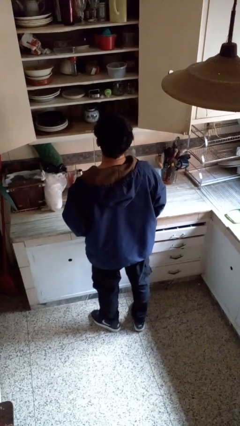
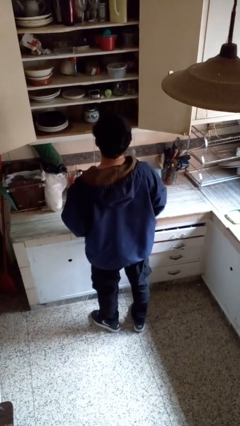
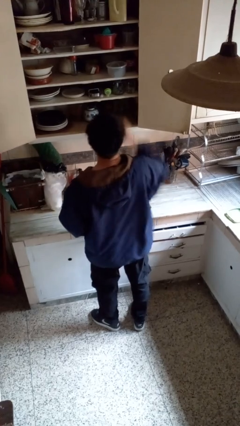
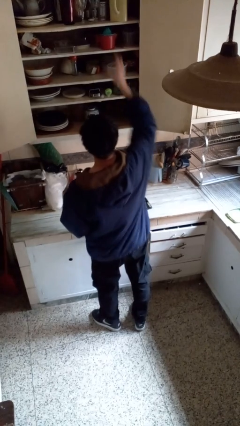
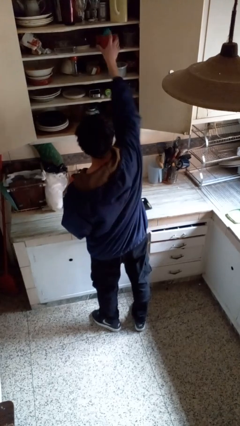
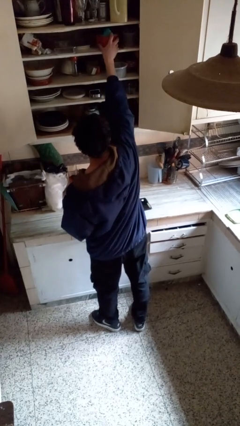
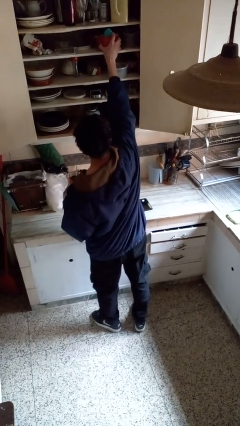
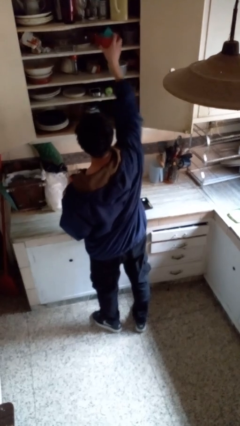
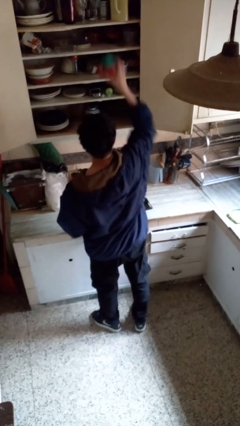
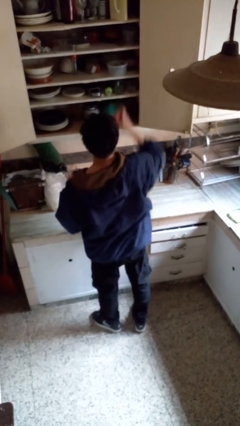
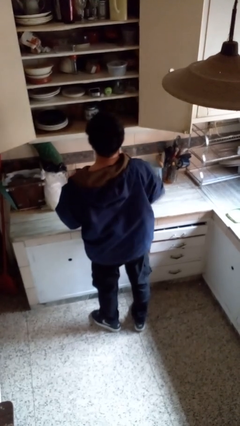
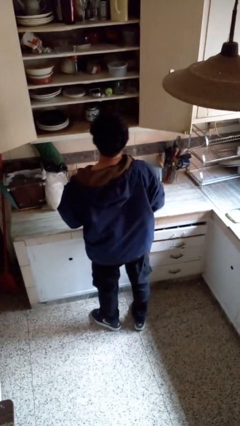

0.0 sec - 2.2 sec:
person takes object from cabinet

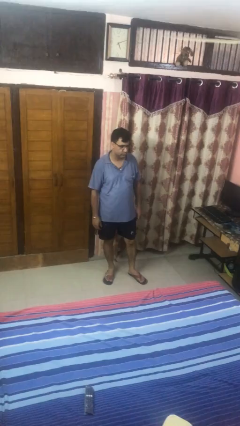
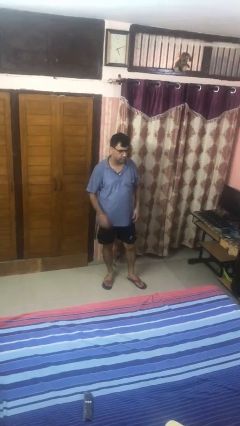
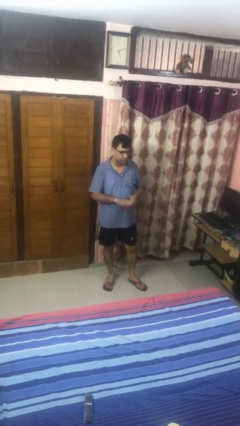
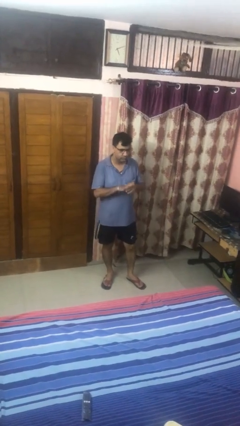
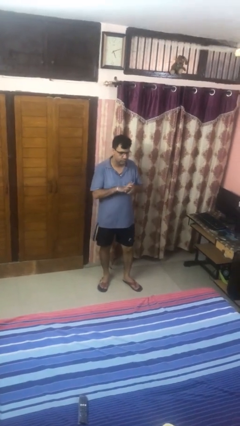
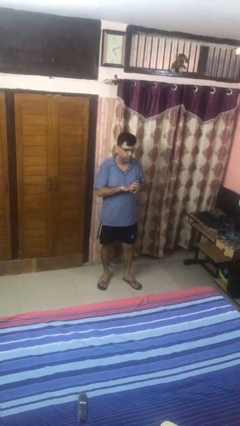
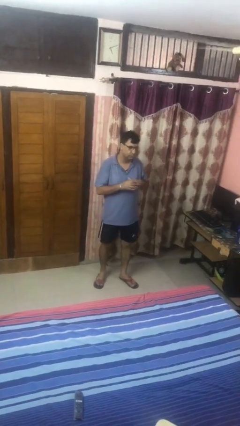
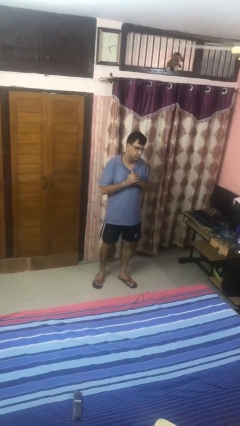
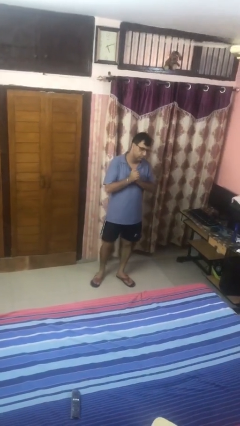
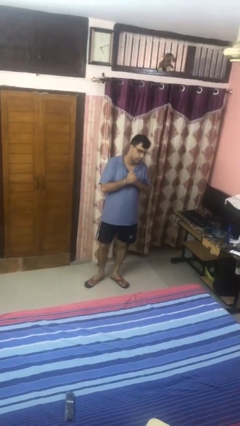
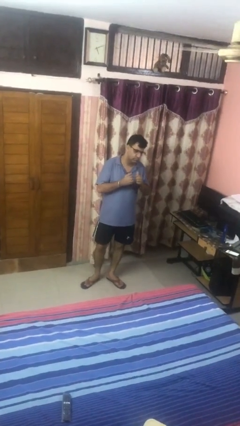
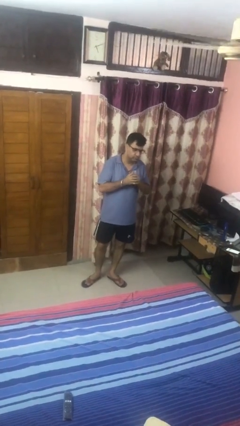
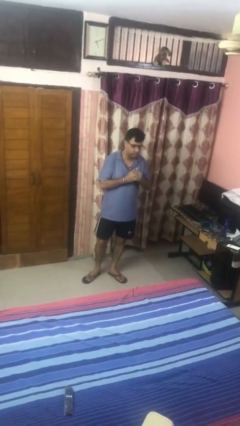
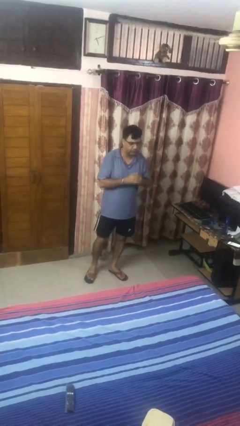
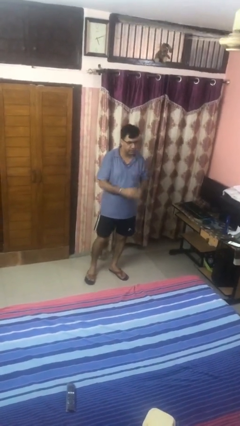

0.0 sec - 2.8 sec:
person cracks knuckles

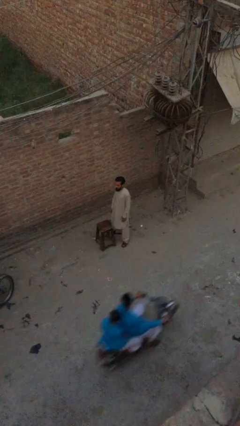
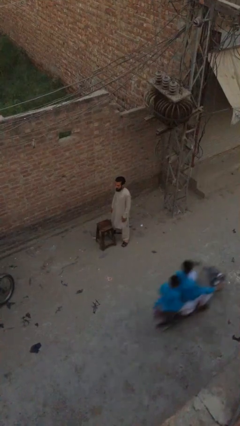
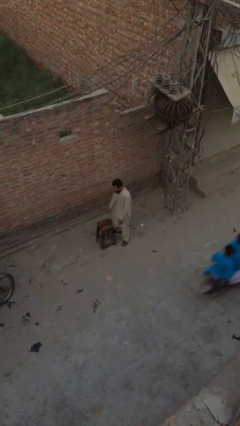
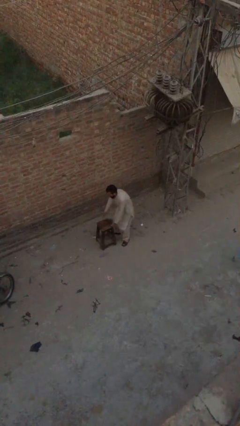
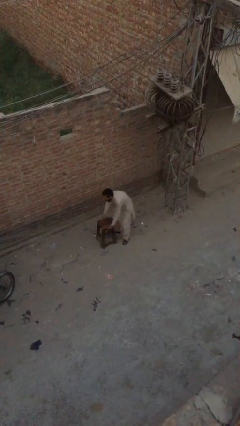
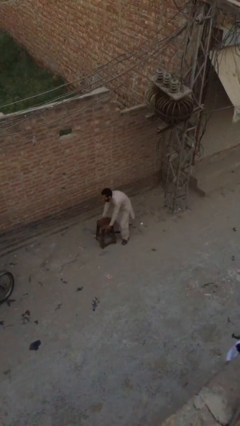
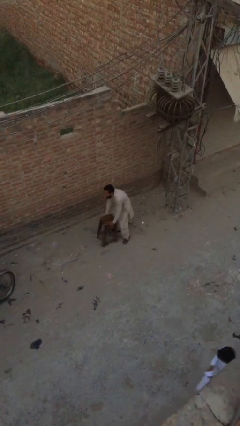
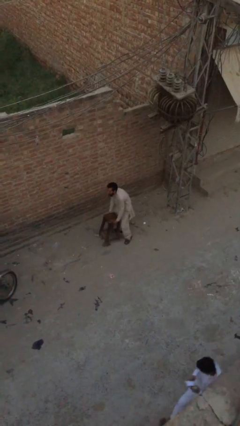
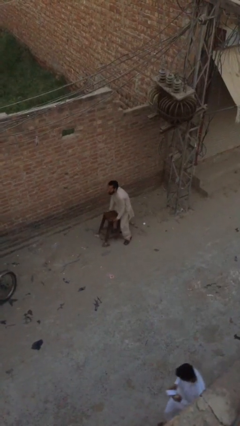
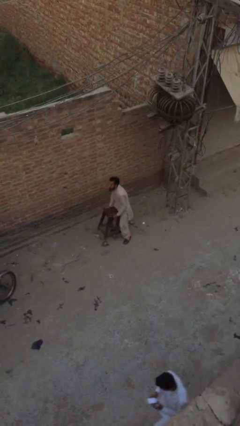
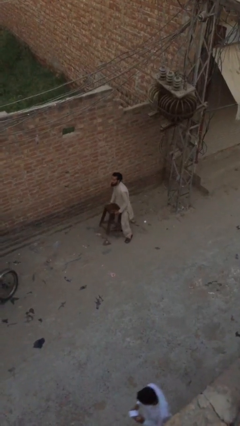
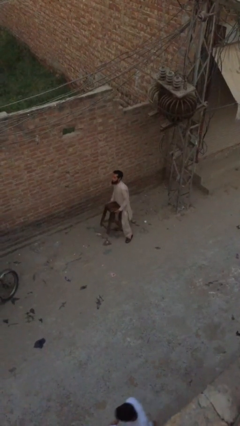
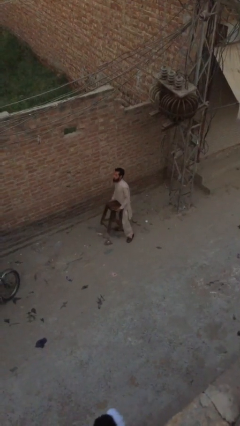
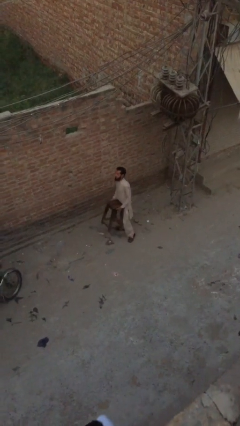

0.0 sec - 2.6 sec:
person picks up object from floor

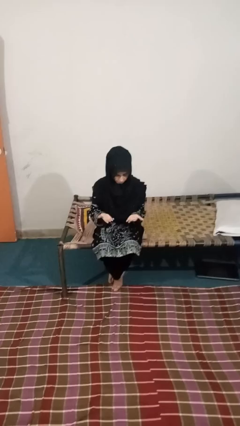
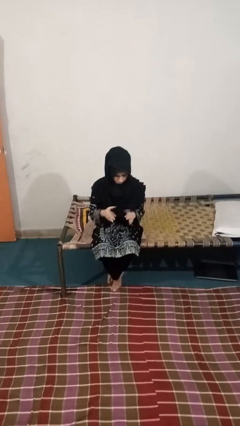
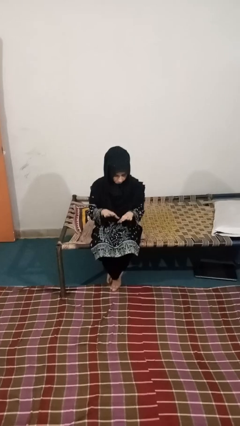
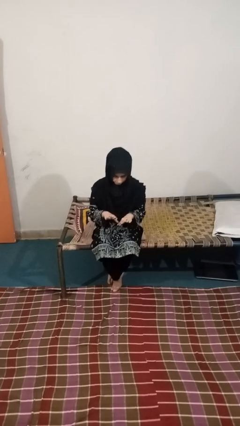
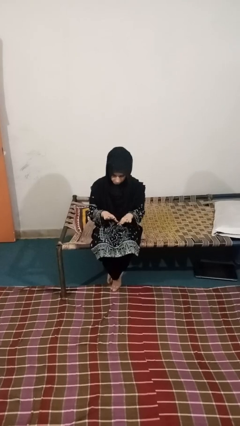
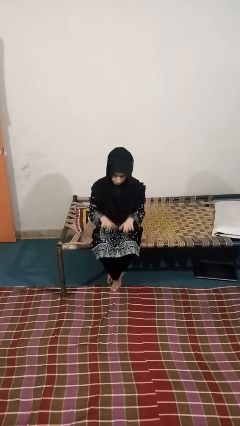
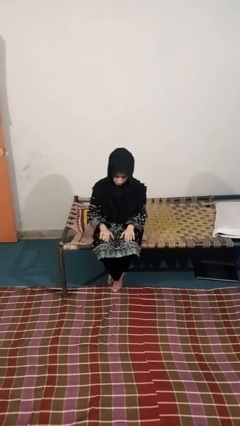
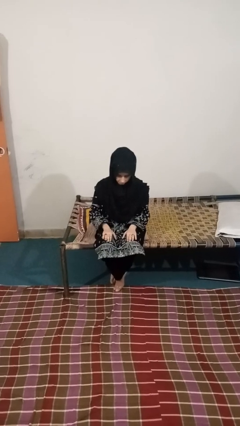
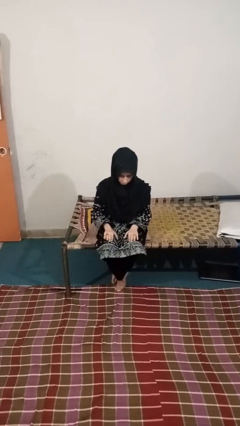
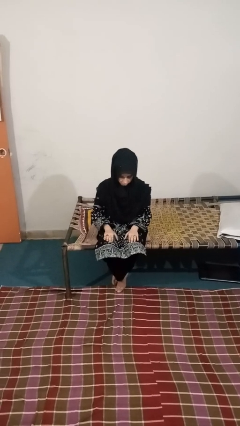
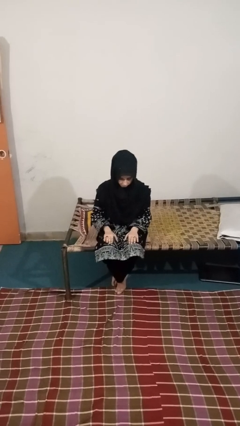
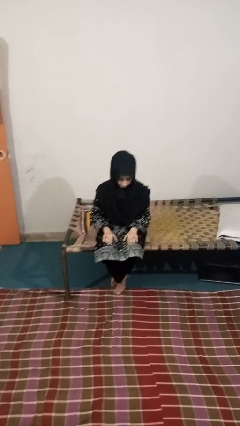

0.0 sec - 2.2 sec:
person looks at hands in lap

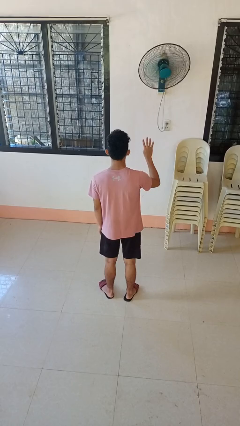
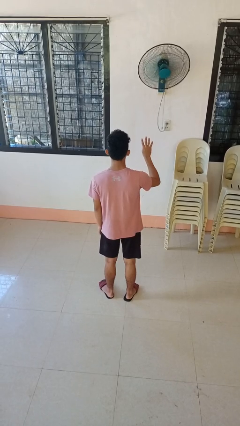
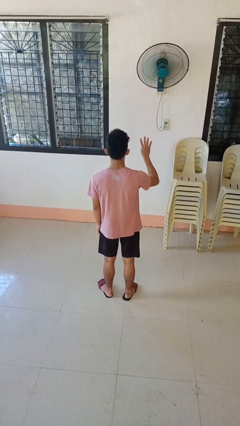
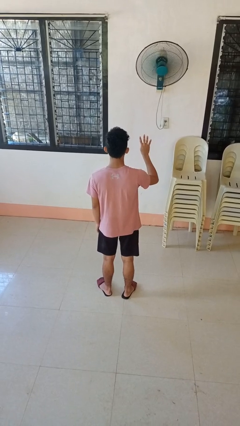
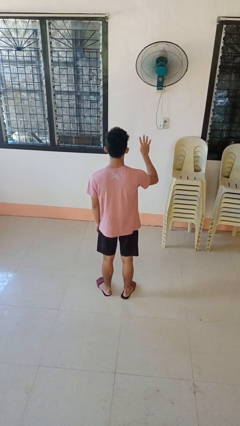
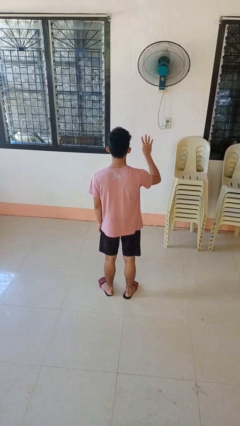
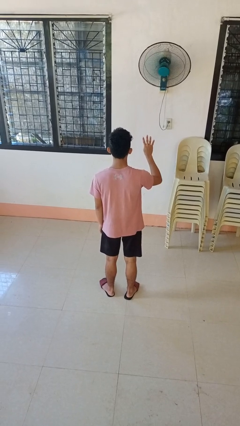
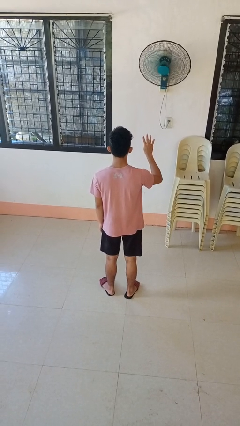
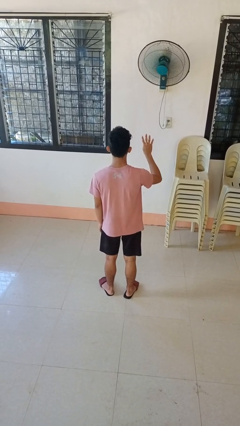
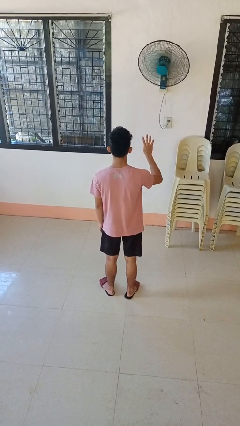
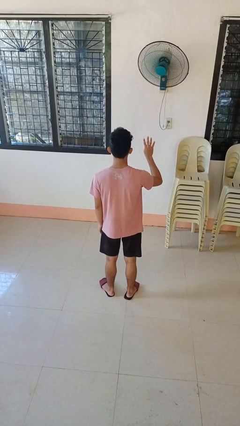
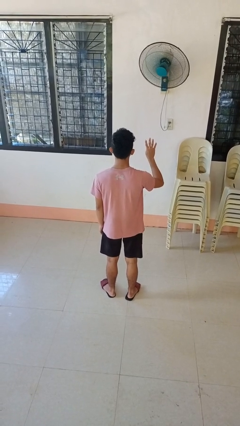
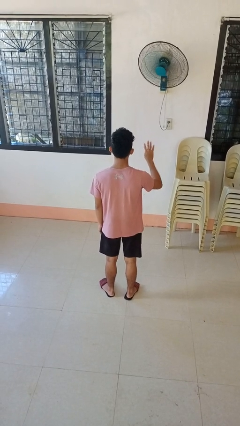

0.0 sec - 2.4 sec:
person gestures number four

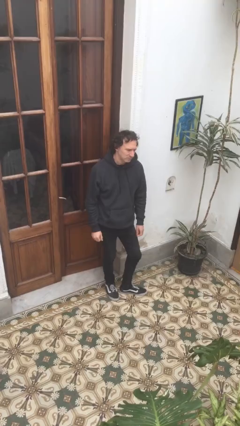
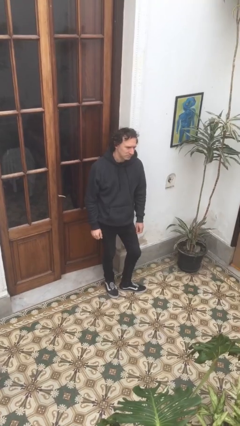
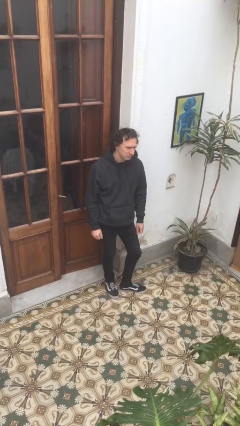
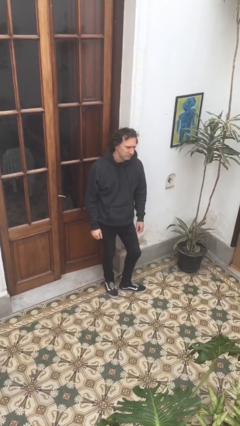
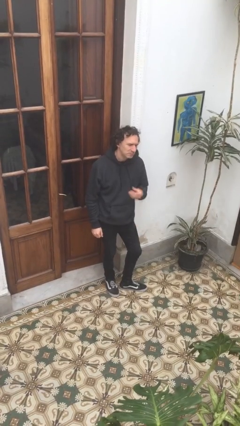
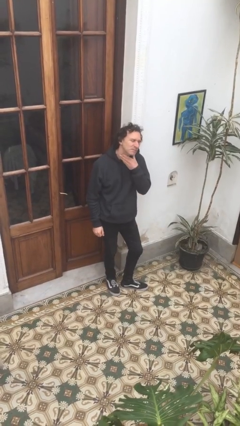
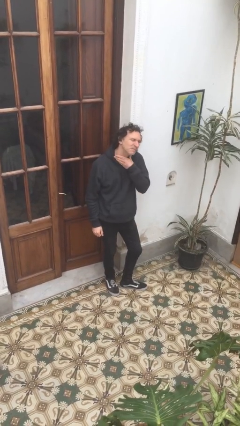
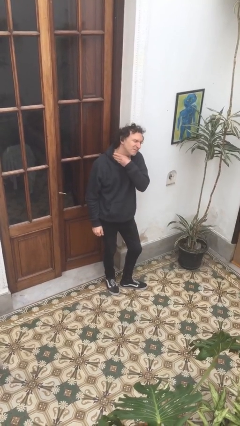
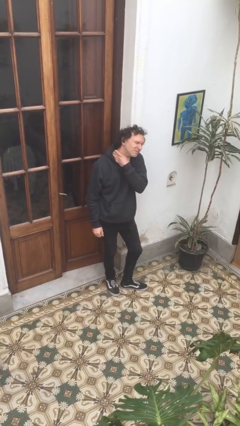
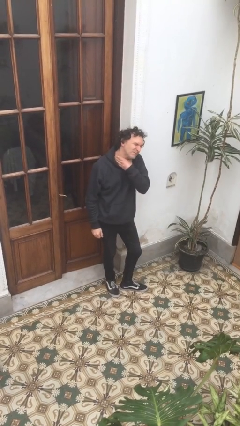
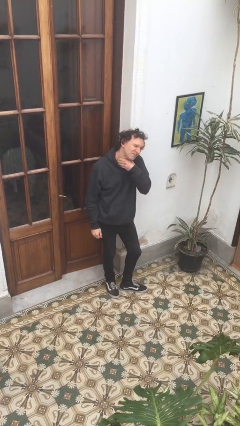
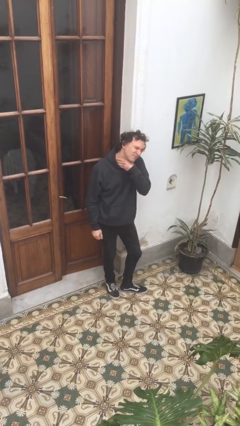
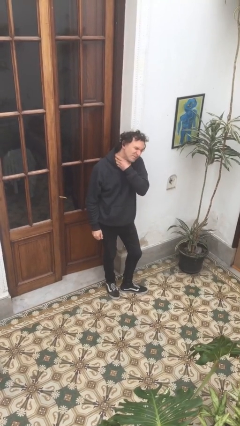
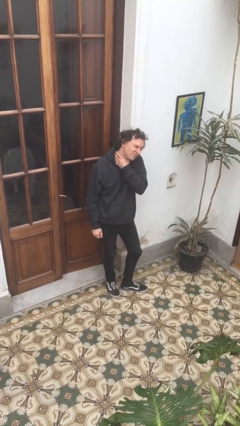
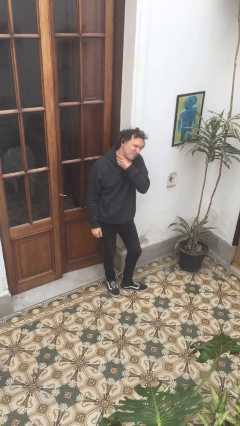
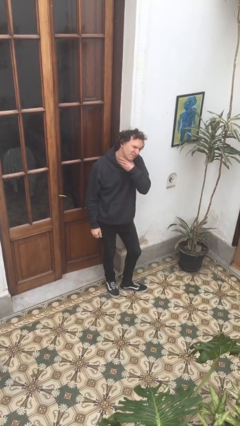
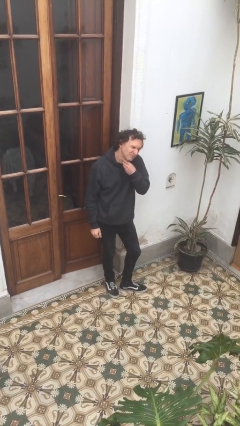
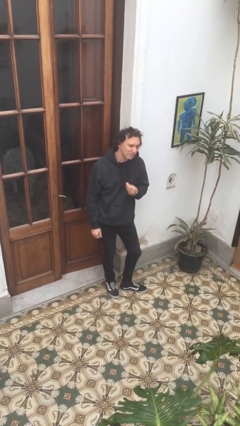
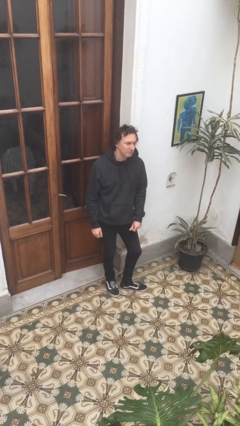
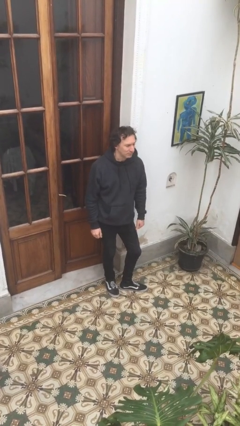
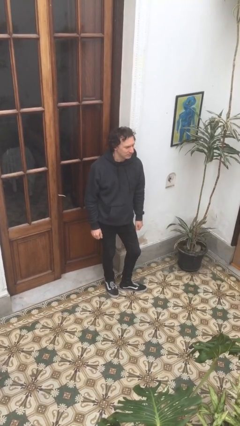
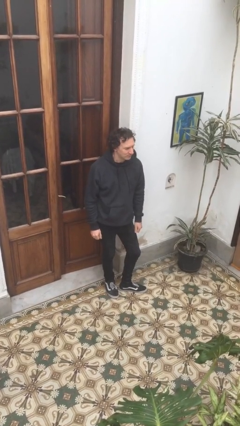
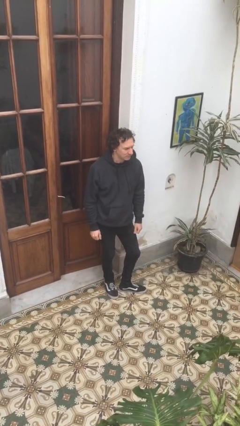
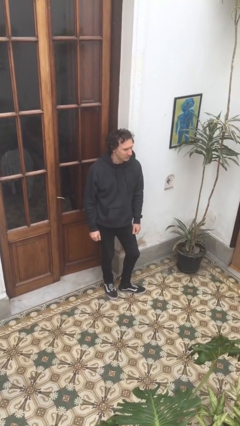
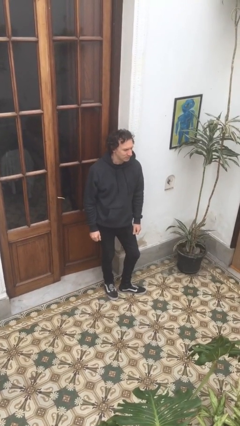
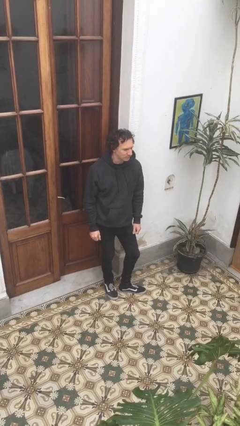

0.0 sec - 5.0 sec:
person rubs neck

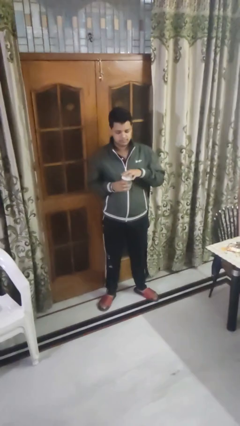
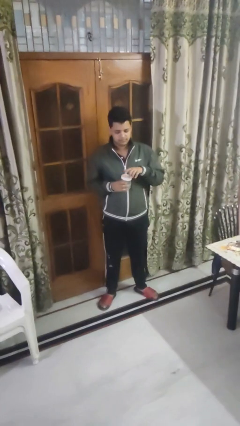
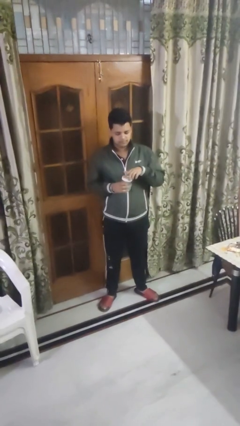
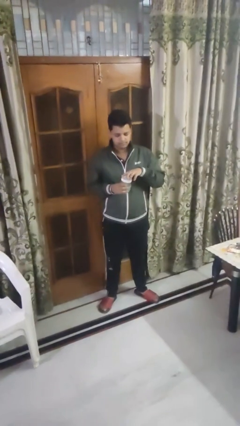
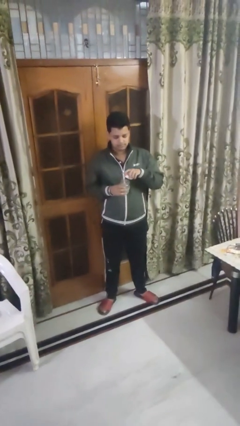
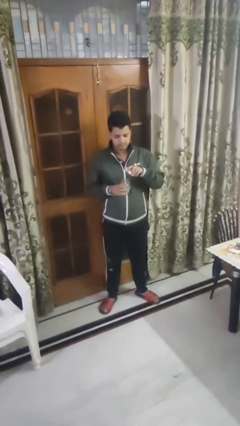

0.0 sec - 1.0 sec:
person opens jar
